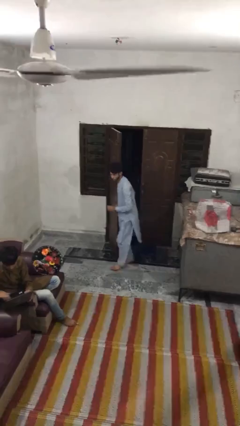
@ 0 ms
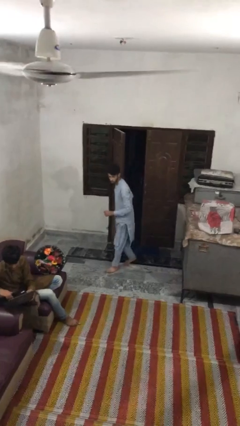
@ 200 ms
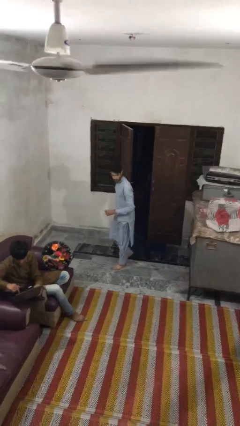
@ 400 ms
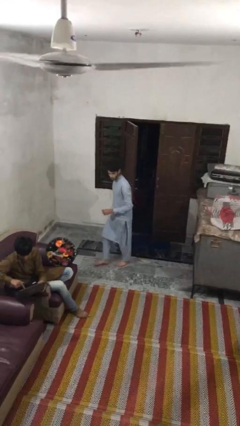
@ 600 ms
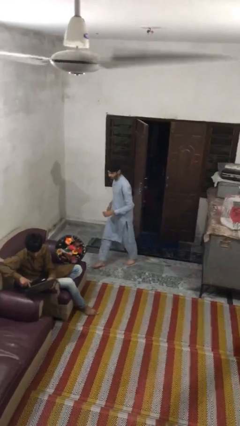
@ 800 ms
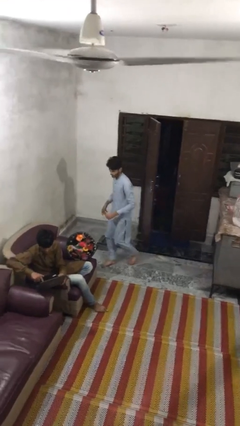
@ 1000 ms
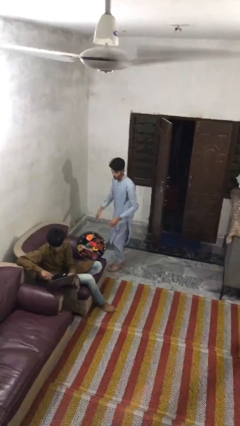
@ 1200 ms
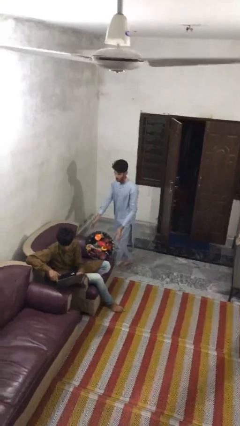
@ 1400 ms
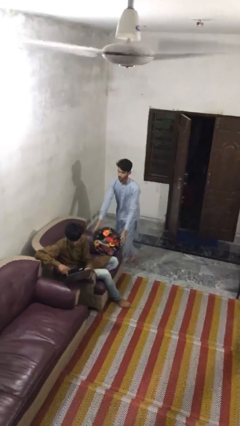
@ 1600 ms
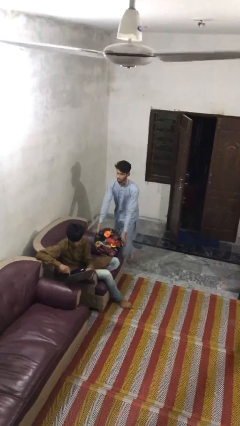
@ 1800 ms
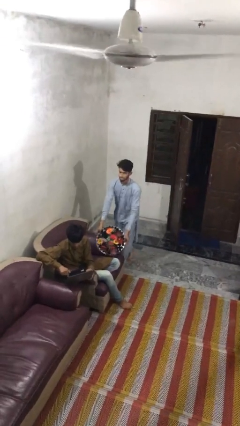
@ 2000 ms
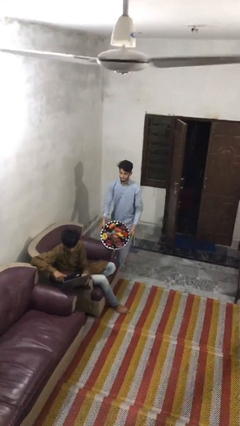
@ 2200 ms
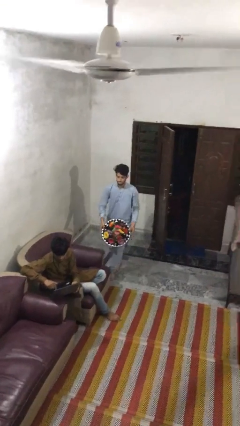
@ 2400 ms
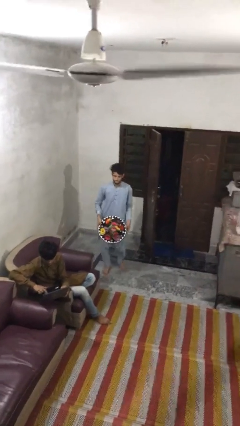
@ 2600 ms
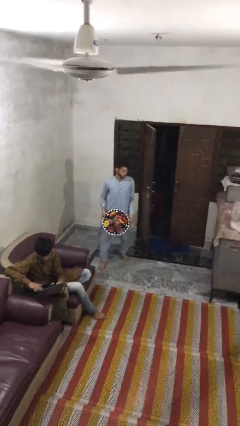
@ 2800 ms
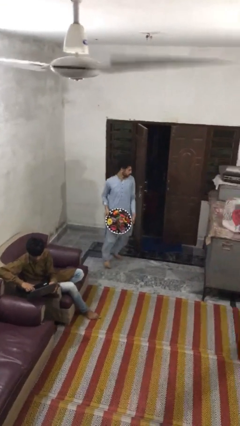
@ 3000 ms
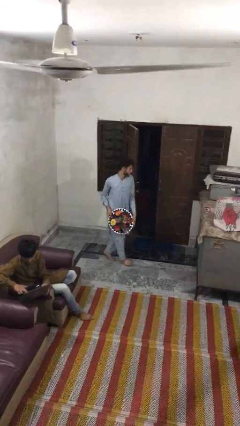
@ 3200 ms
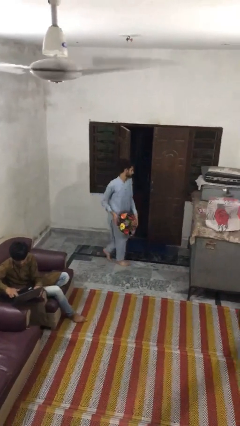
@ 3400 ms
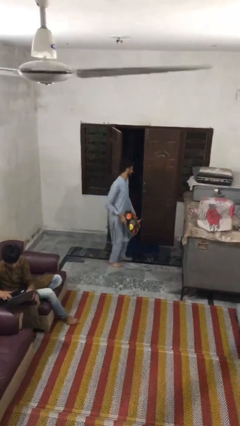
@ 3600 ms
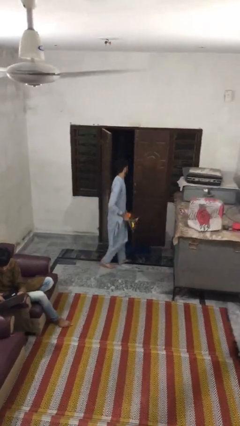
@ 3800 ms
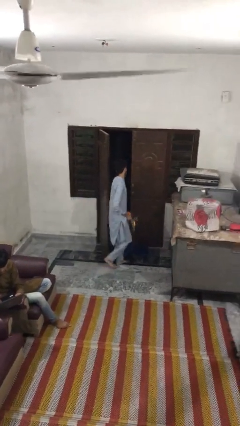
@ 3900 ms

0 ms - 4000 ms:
person steals object from person

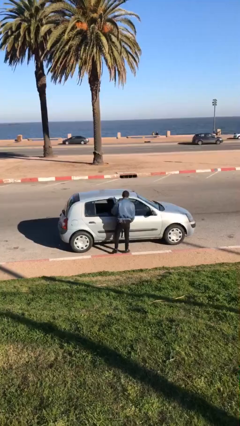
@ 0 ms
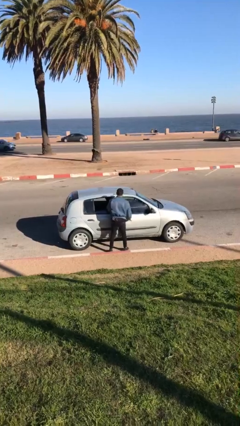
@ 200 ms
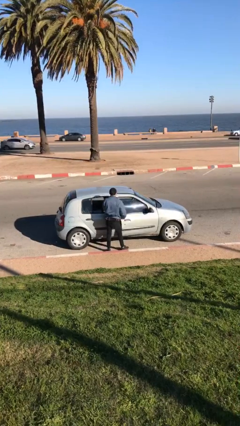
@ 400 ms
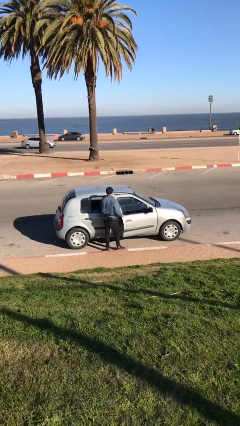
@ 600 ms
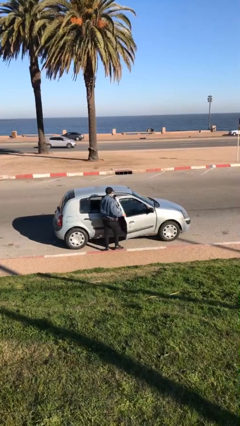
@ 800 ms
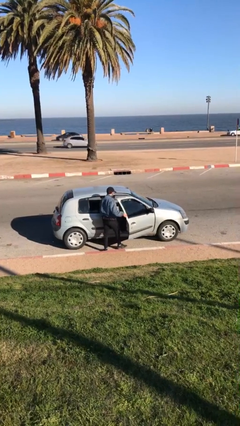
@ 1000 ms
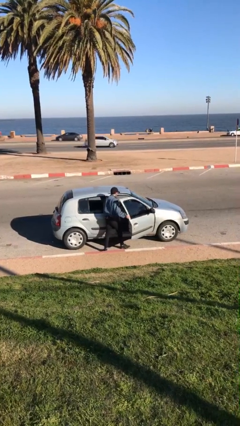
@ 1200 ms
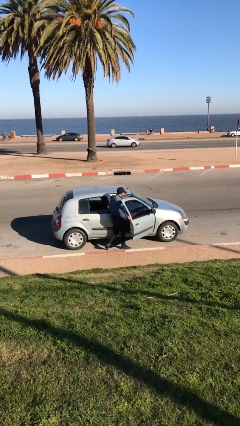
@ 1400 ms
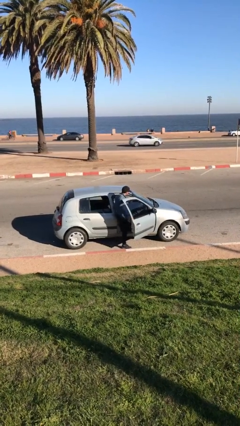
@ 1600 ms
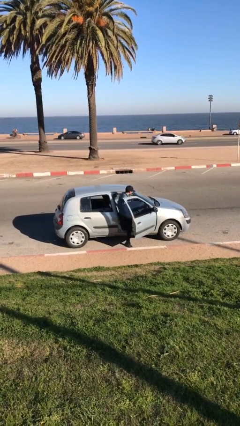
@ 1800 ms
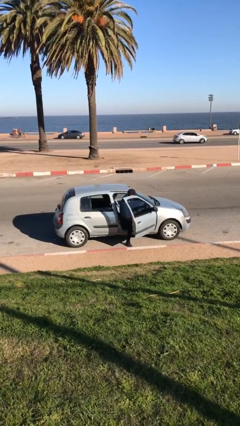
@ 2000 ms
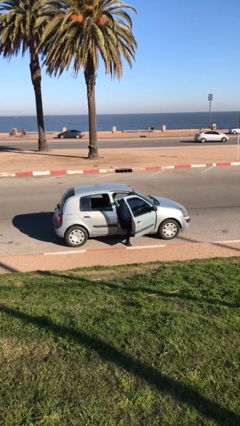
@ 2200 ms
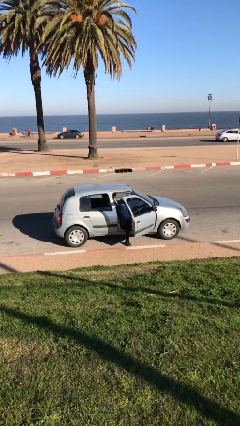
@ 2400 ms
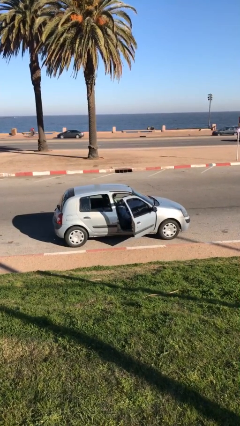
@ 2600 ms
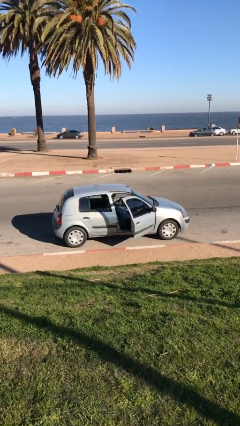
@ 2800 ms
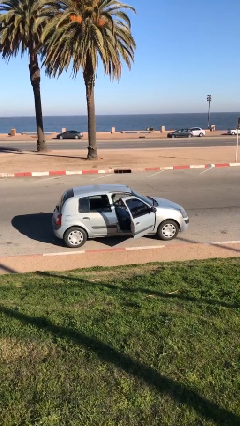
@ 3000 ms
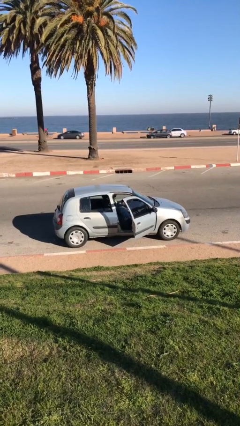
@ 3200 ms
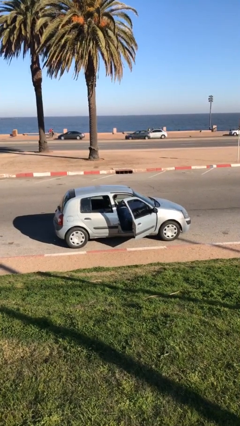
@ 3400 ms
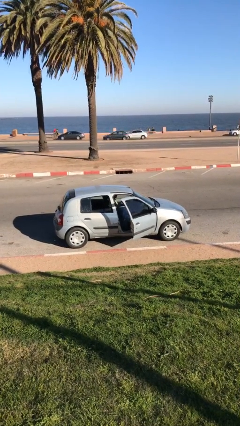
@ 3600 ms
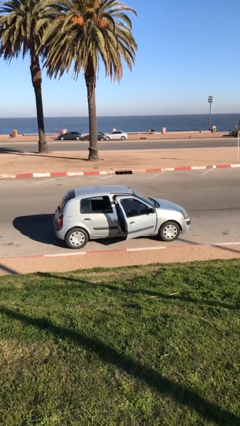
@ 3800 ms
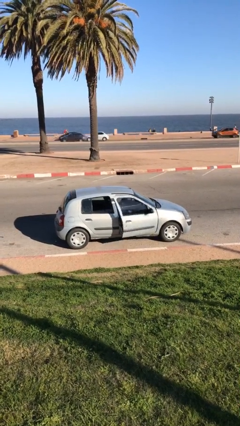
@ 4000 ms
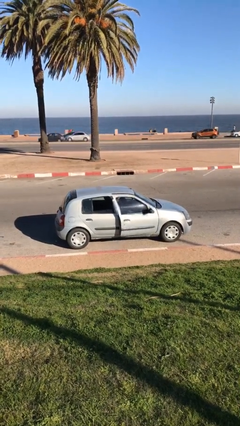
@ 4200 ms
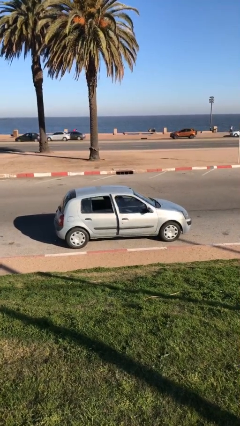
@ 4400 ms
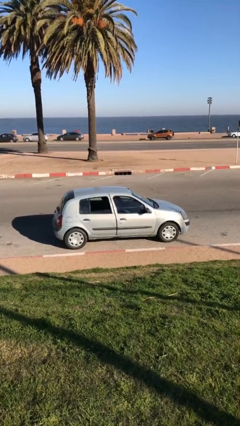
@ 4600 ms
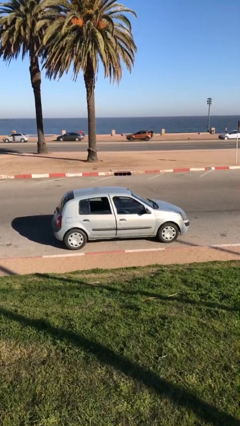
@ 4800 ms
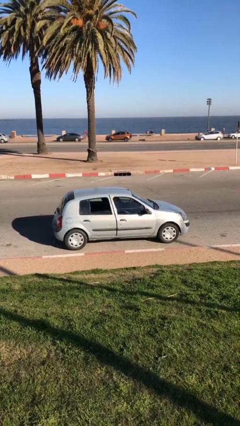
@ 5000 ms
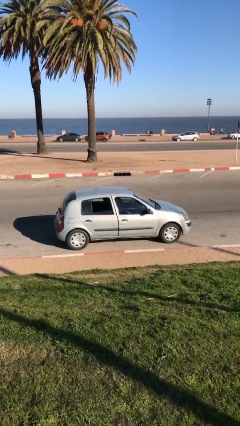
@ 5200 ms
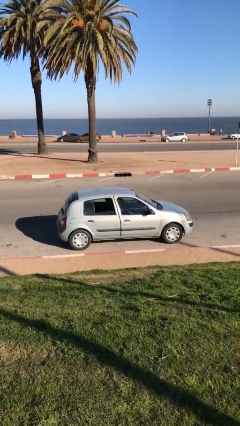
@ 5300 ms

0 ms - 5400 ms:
car picks up person

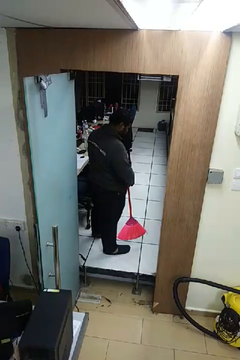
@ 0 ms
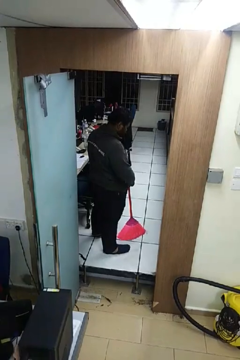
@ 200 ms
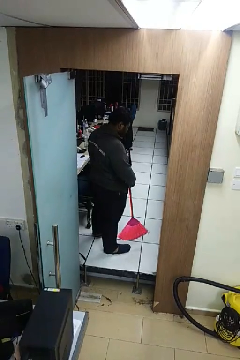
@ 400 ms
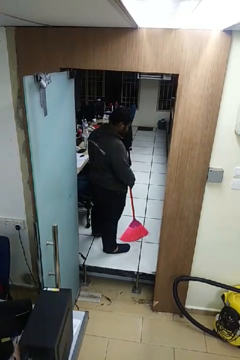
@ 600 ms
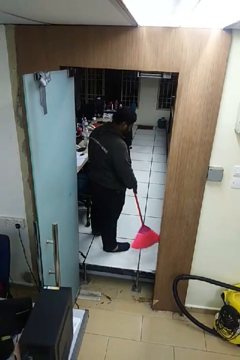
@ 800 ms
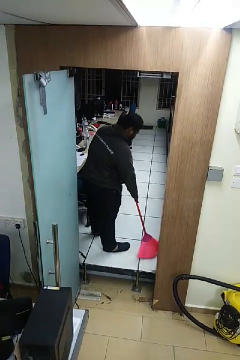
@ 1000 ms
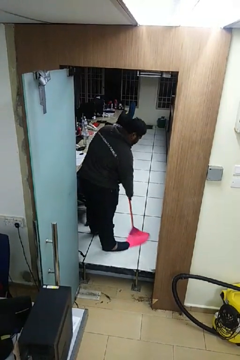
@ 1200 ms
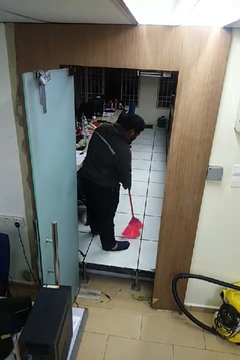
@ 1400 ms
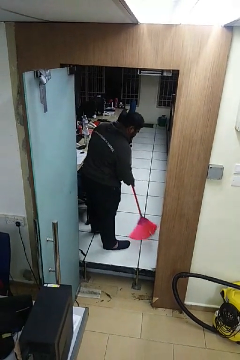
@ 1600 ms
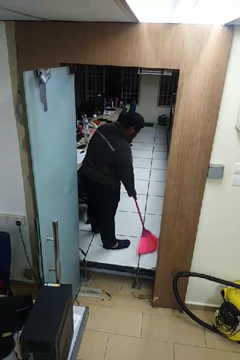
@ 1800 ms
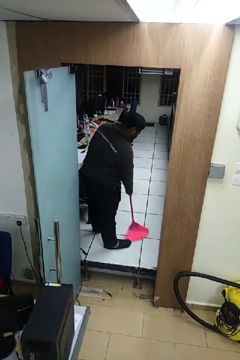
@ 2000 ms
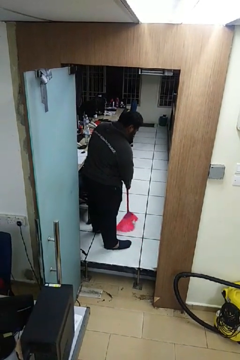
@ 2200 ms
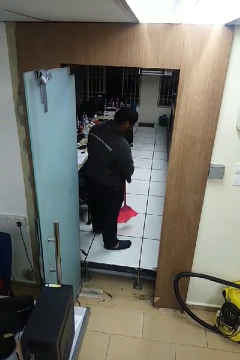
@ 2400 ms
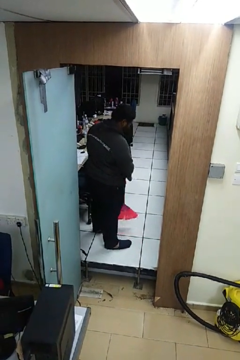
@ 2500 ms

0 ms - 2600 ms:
person sweeps floor

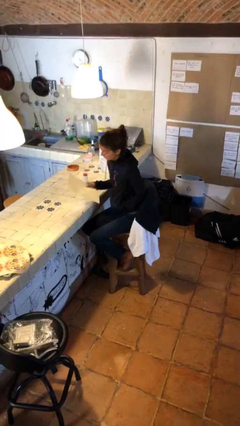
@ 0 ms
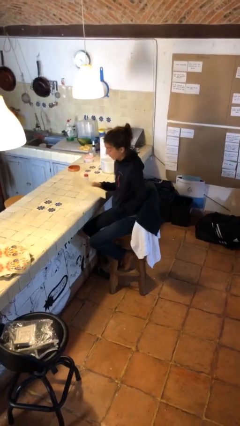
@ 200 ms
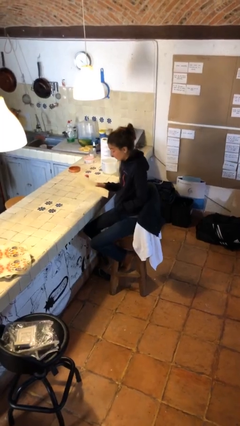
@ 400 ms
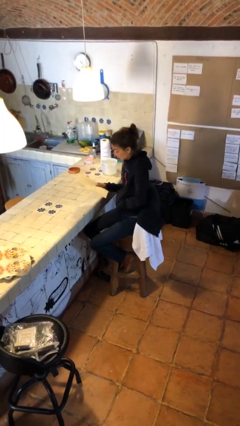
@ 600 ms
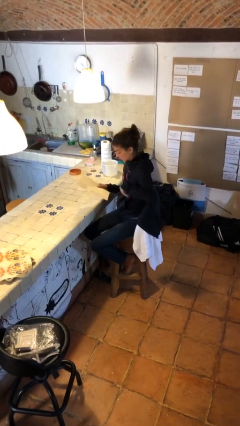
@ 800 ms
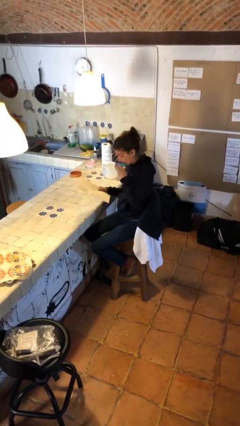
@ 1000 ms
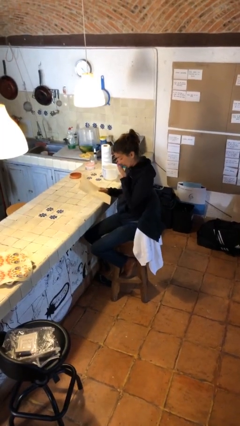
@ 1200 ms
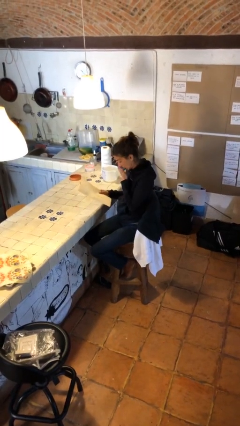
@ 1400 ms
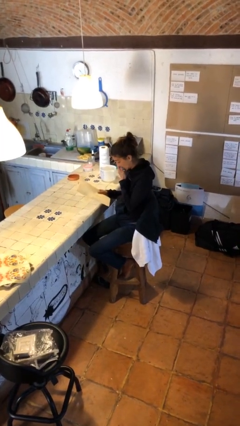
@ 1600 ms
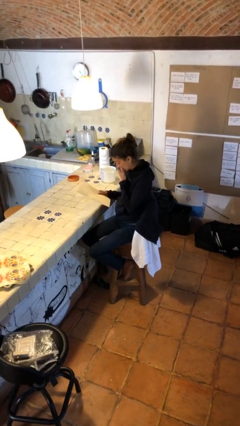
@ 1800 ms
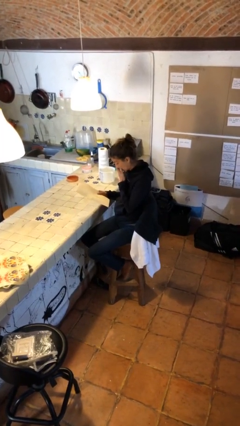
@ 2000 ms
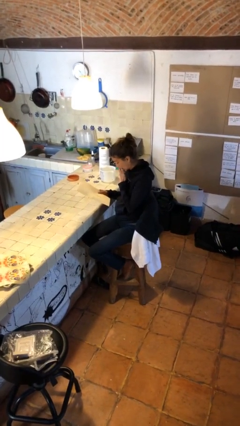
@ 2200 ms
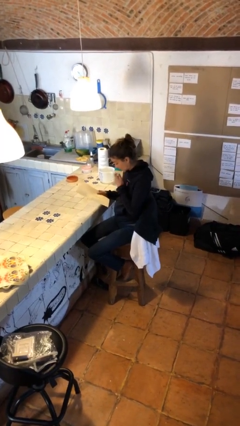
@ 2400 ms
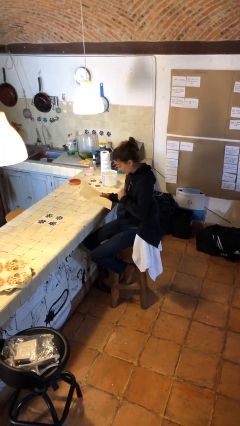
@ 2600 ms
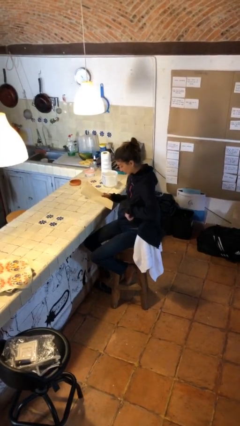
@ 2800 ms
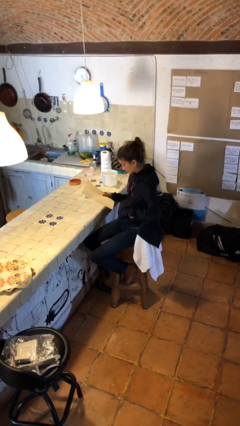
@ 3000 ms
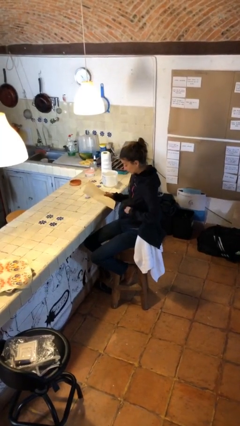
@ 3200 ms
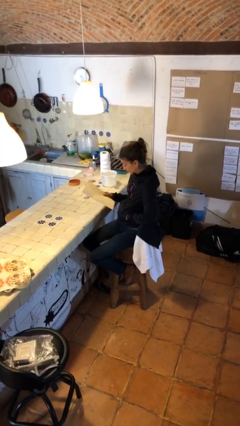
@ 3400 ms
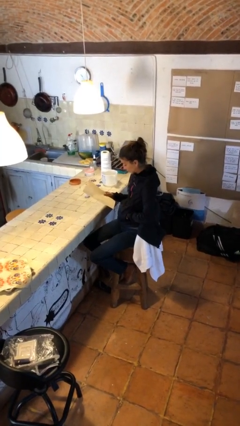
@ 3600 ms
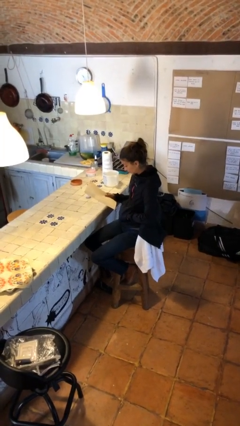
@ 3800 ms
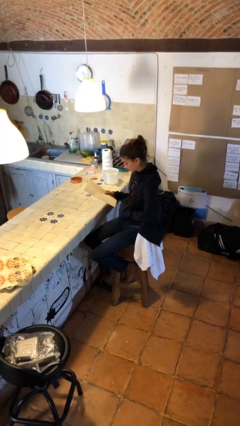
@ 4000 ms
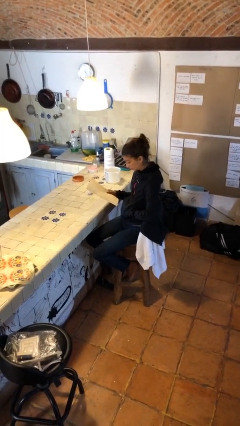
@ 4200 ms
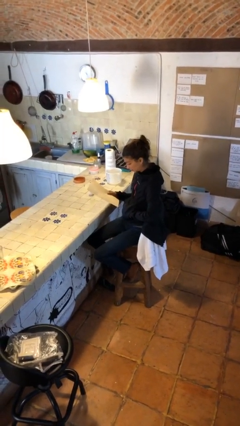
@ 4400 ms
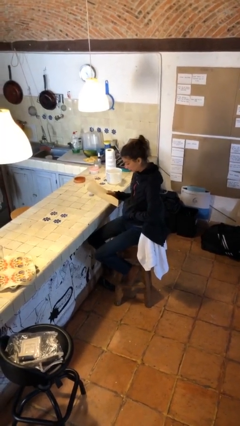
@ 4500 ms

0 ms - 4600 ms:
person reads document

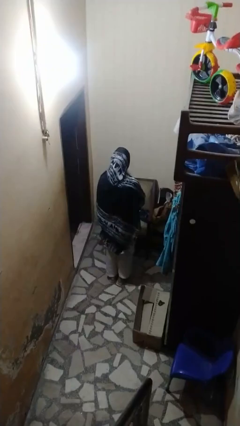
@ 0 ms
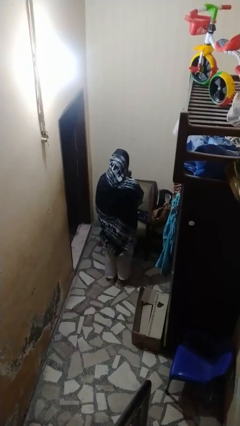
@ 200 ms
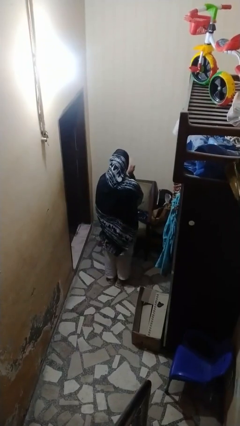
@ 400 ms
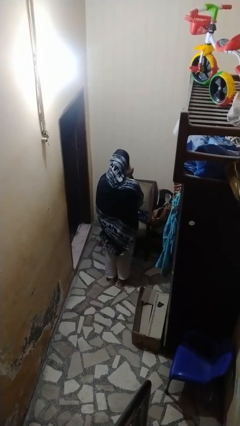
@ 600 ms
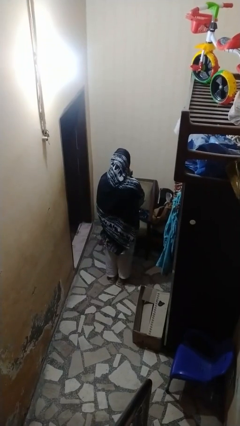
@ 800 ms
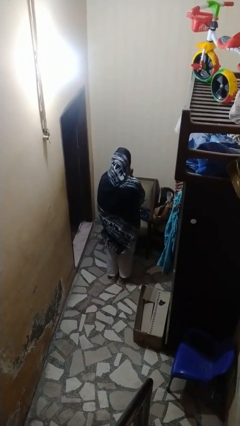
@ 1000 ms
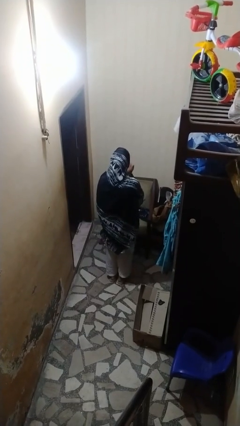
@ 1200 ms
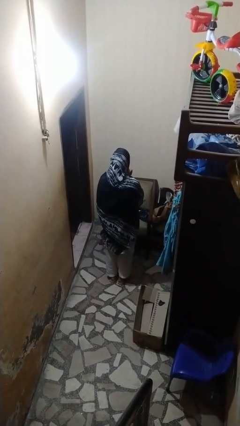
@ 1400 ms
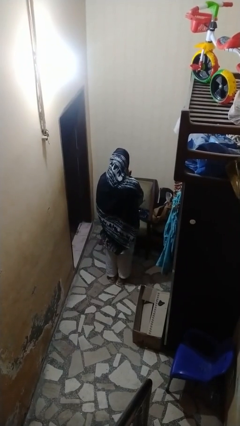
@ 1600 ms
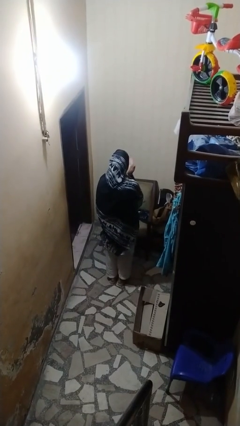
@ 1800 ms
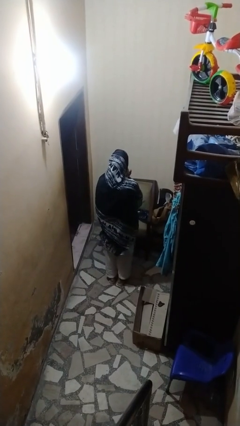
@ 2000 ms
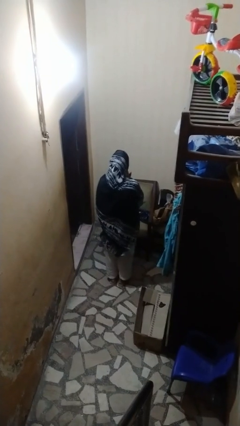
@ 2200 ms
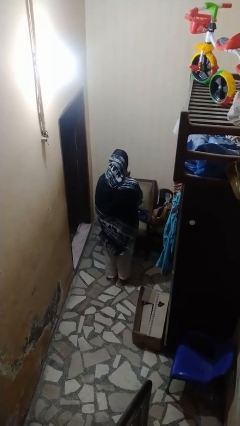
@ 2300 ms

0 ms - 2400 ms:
person gestures blow kiss
